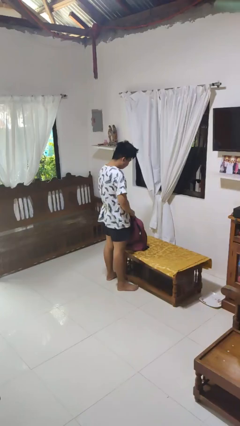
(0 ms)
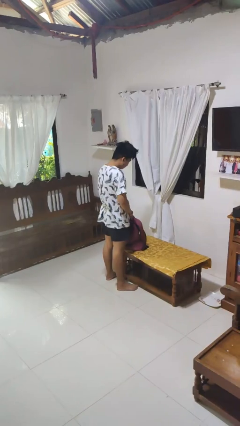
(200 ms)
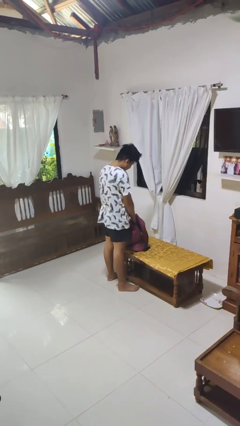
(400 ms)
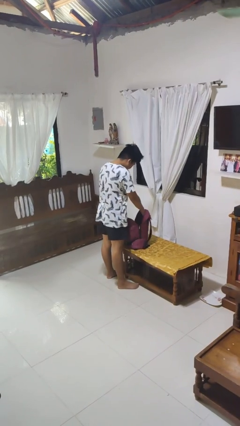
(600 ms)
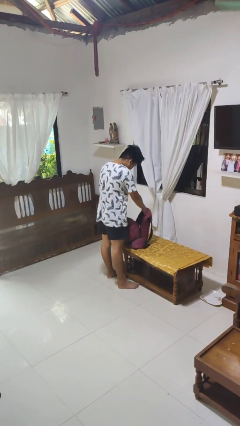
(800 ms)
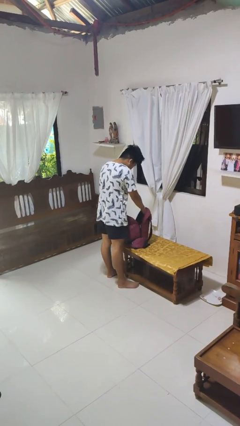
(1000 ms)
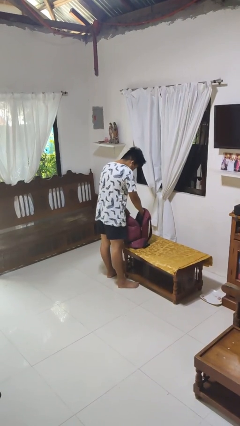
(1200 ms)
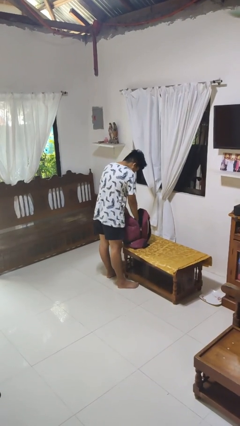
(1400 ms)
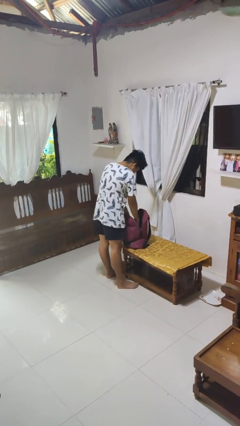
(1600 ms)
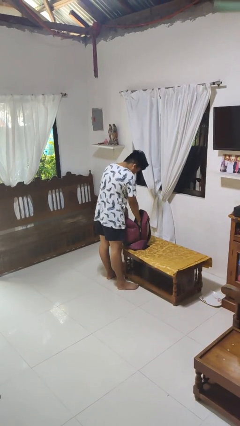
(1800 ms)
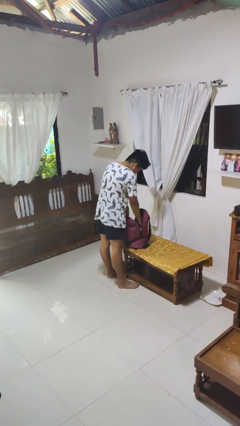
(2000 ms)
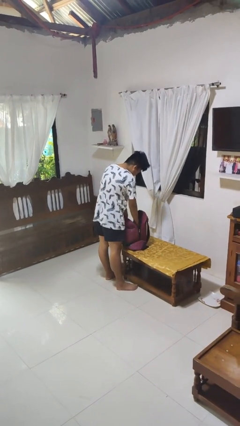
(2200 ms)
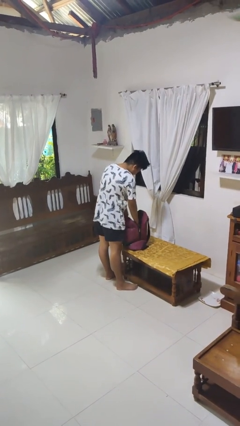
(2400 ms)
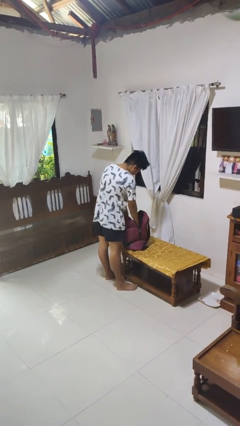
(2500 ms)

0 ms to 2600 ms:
person searches in bag

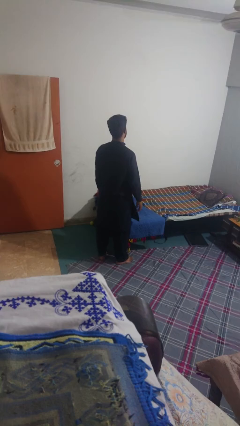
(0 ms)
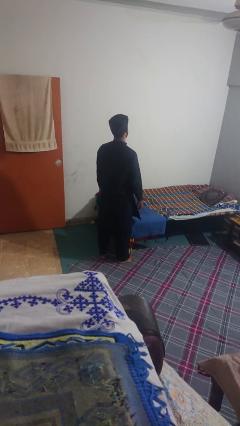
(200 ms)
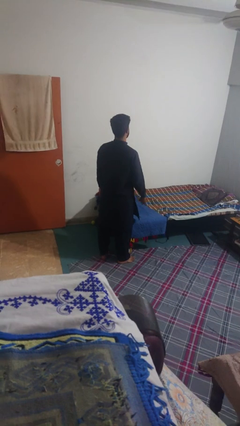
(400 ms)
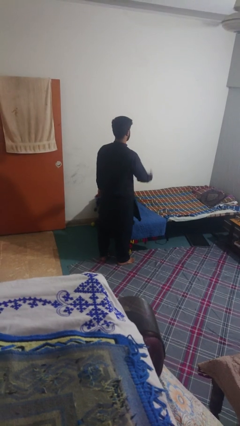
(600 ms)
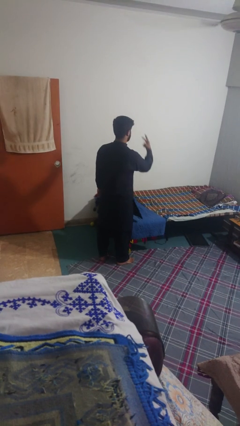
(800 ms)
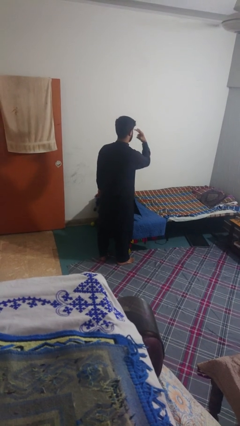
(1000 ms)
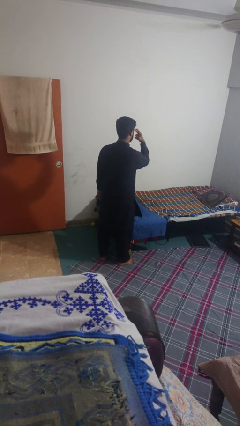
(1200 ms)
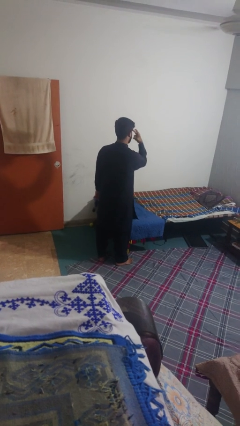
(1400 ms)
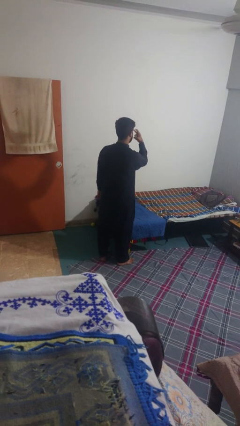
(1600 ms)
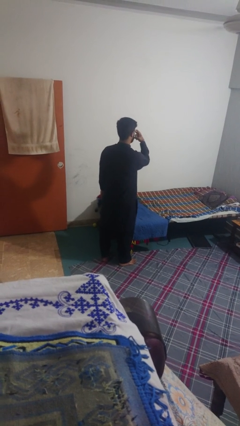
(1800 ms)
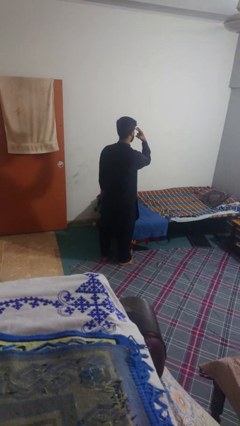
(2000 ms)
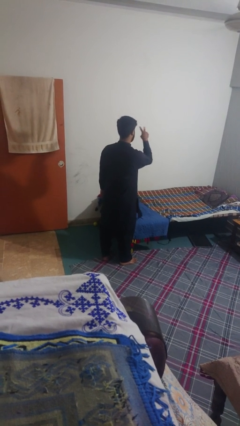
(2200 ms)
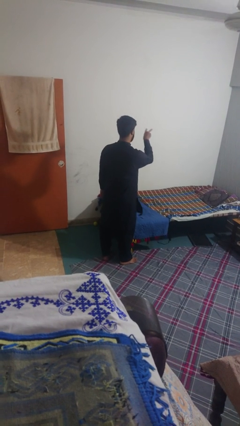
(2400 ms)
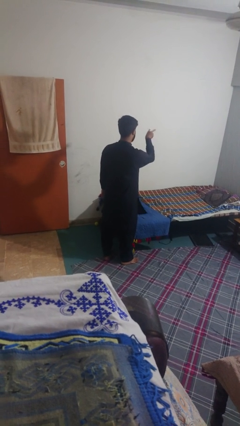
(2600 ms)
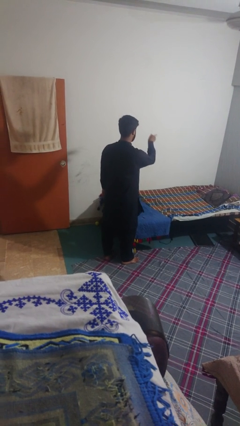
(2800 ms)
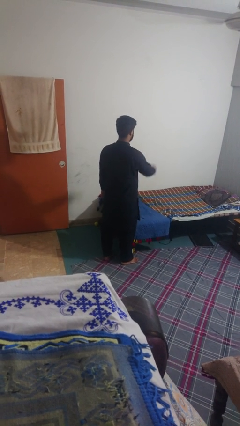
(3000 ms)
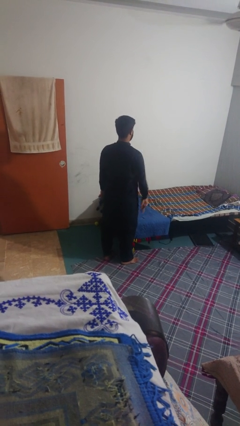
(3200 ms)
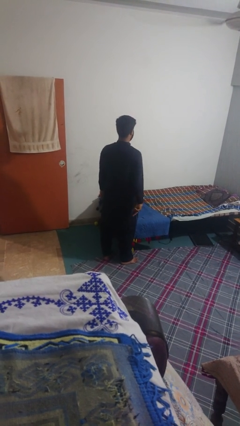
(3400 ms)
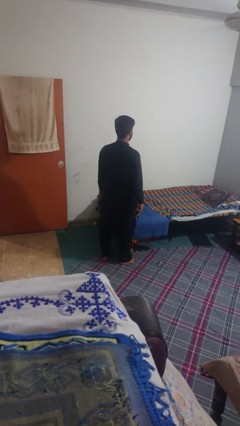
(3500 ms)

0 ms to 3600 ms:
person gestures watch closely

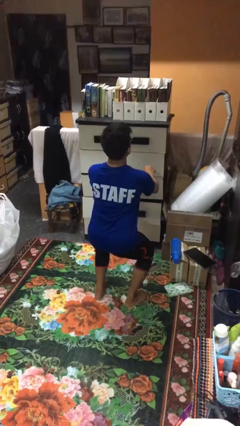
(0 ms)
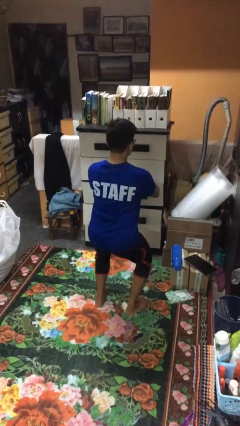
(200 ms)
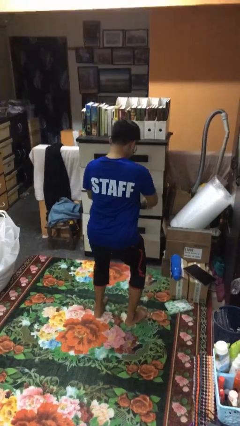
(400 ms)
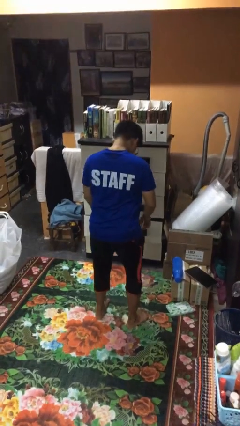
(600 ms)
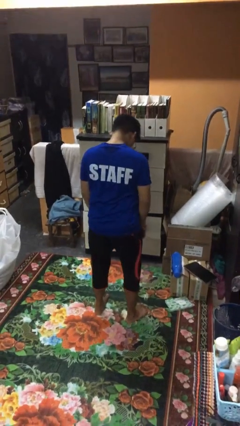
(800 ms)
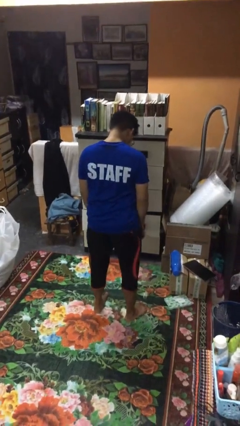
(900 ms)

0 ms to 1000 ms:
person stands up

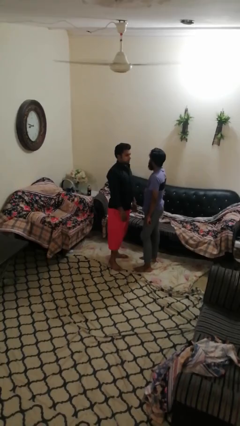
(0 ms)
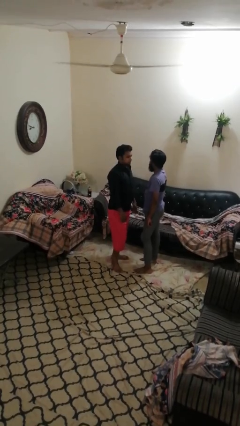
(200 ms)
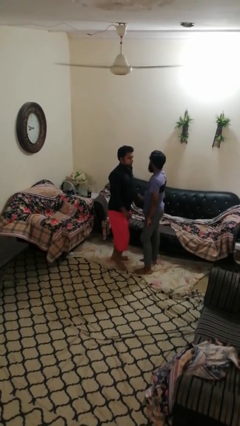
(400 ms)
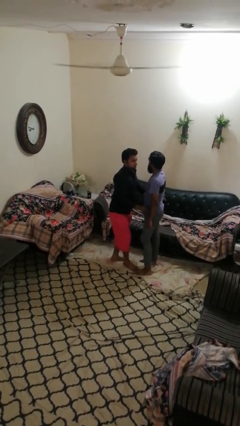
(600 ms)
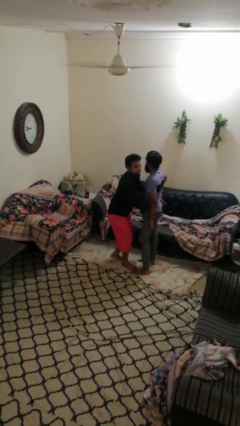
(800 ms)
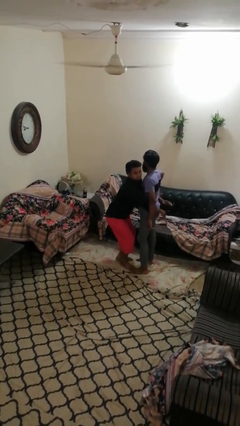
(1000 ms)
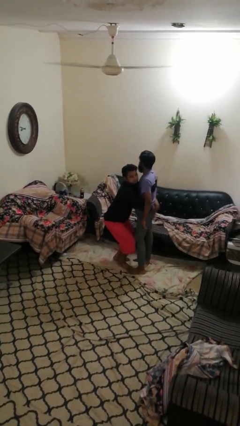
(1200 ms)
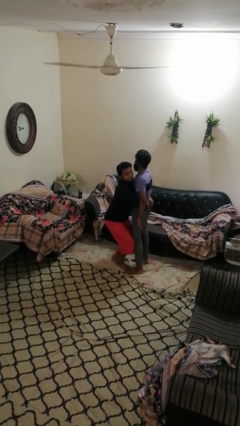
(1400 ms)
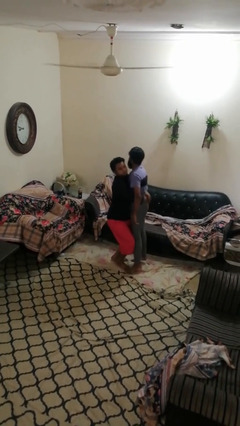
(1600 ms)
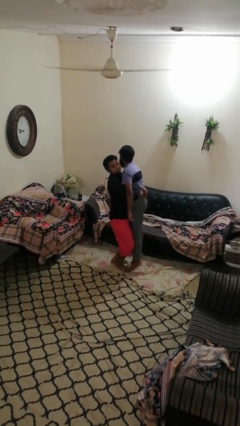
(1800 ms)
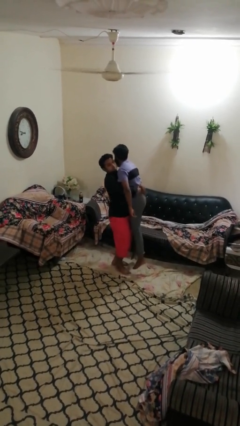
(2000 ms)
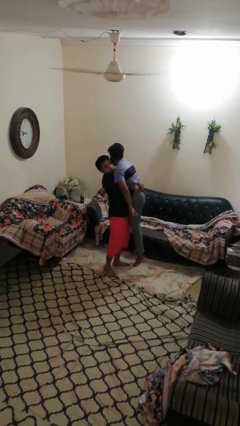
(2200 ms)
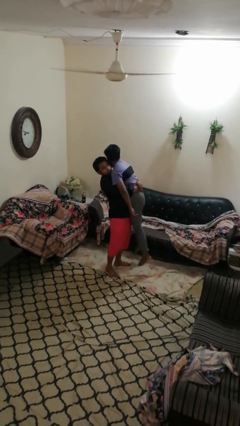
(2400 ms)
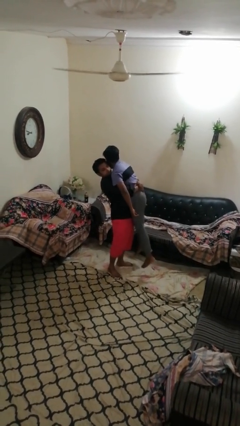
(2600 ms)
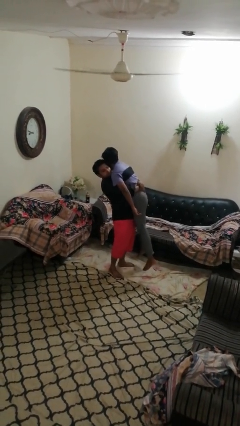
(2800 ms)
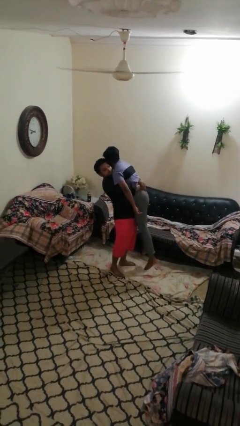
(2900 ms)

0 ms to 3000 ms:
person picks up person

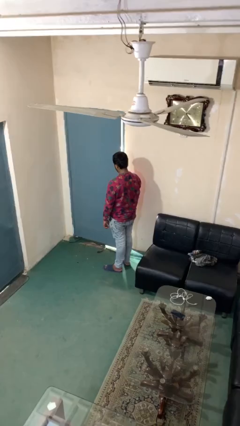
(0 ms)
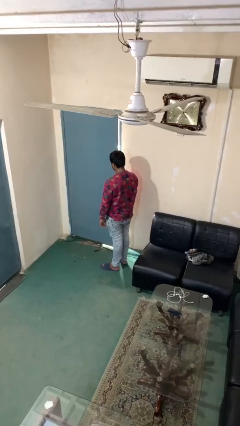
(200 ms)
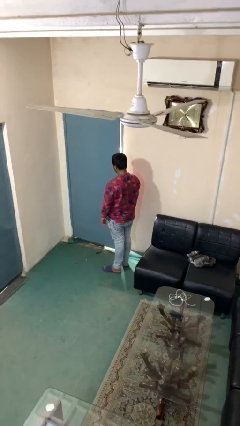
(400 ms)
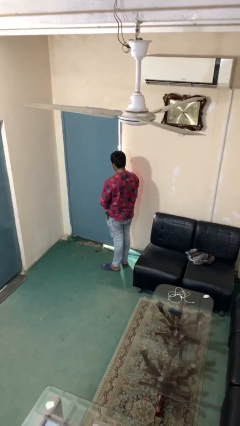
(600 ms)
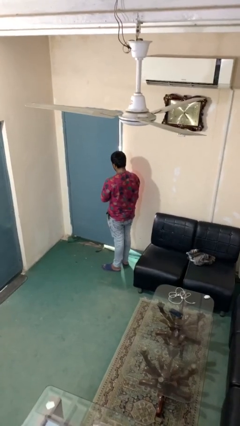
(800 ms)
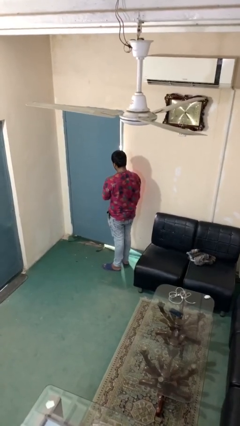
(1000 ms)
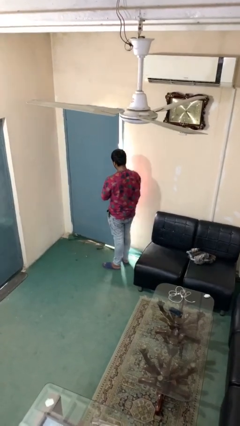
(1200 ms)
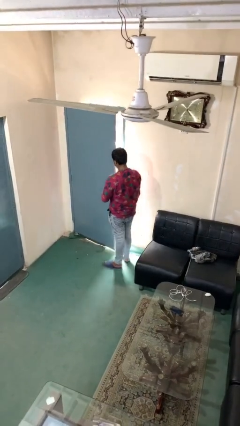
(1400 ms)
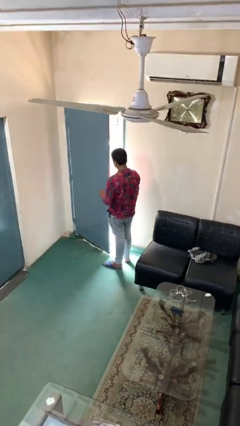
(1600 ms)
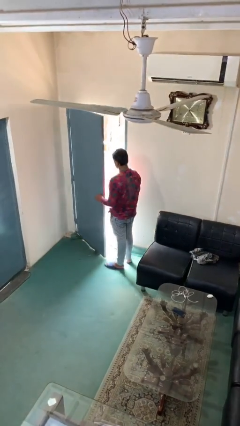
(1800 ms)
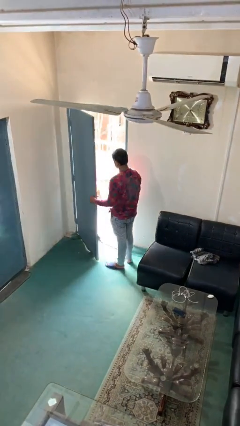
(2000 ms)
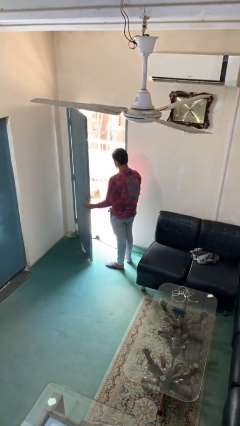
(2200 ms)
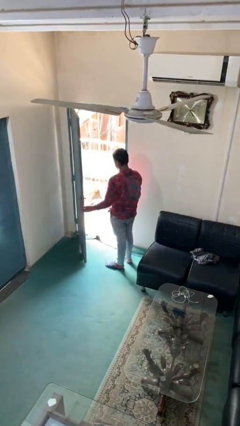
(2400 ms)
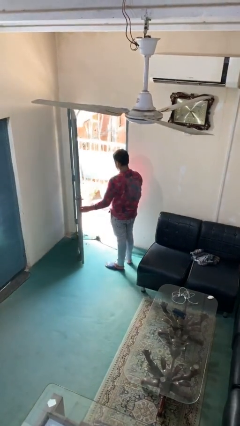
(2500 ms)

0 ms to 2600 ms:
person opens facility door

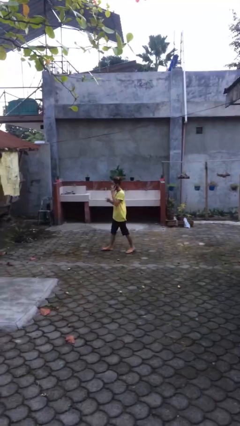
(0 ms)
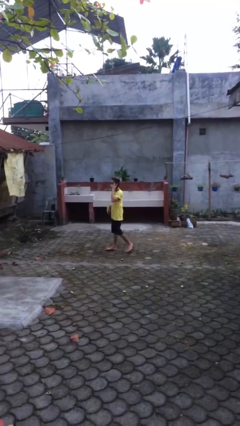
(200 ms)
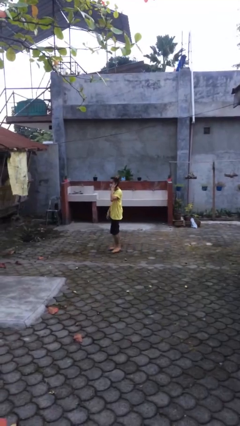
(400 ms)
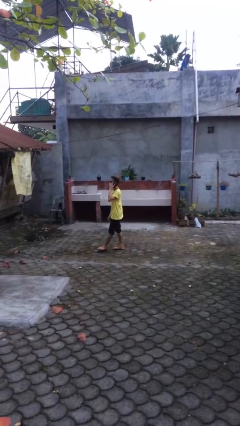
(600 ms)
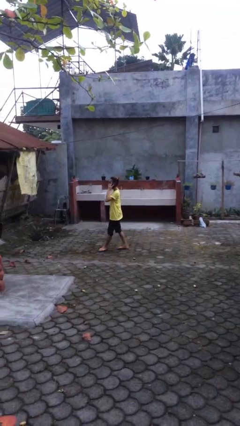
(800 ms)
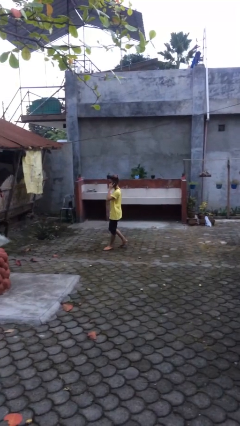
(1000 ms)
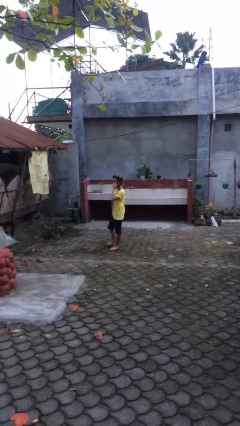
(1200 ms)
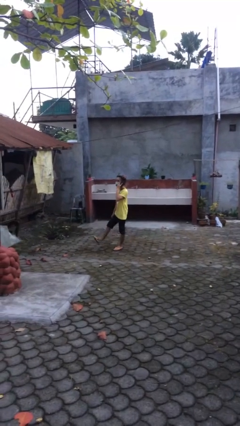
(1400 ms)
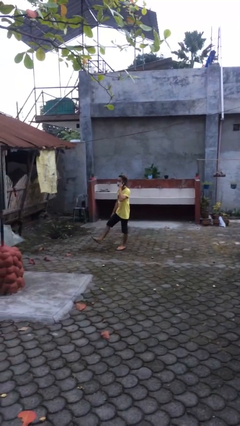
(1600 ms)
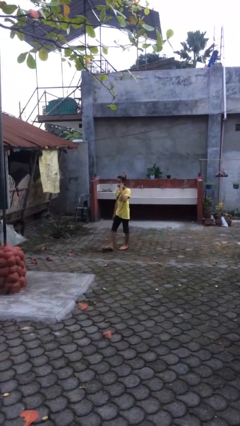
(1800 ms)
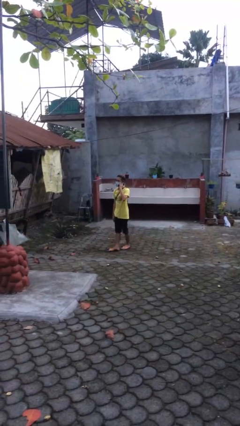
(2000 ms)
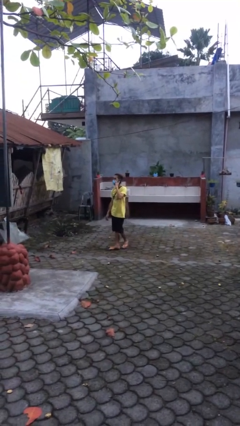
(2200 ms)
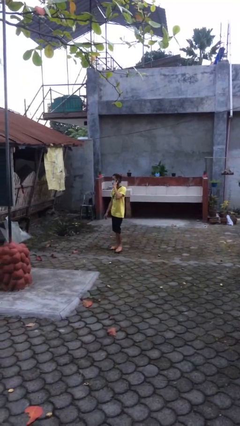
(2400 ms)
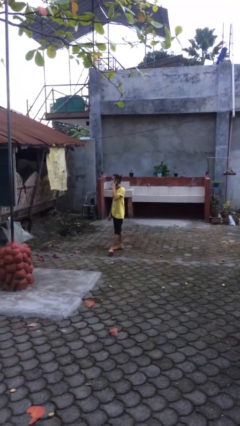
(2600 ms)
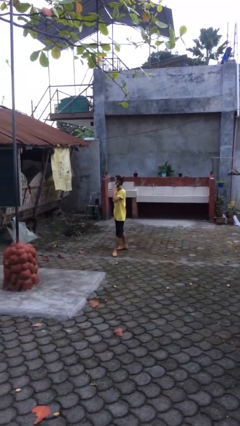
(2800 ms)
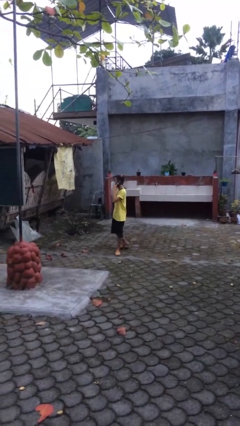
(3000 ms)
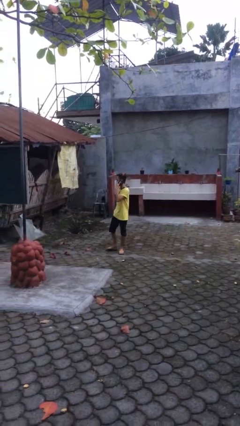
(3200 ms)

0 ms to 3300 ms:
person talks on phone

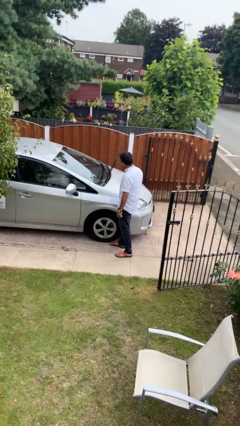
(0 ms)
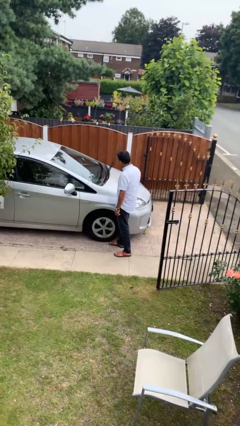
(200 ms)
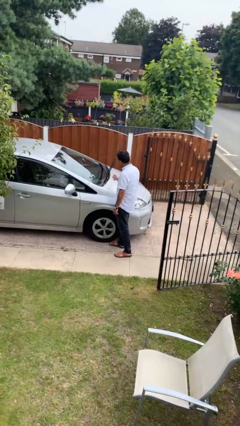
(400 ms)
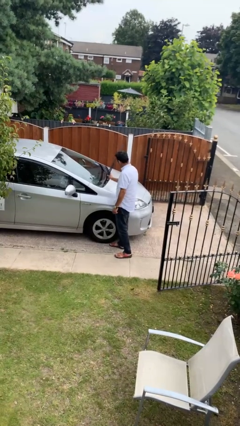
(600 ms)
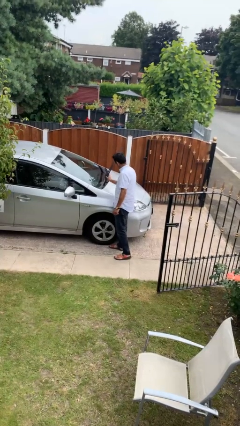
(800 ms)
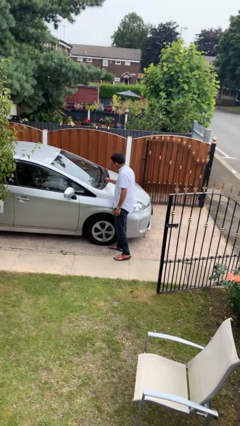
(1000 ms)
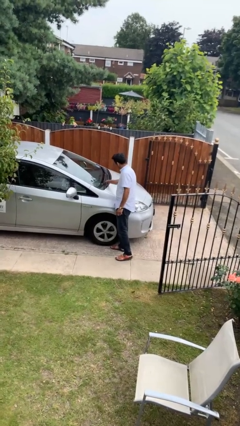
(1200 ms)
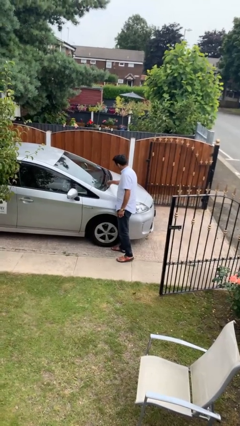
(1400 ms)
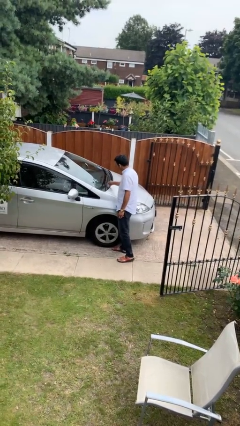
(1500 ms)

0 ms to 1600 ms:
person flips down car wipers
